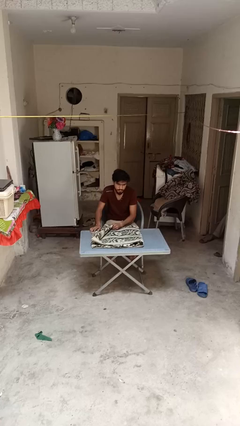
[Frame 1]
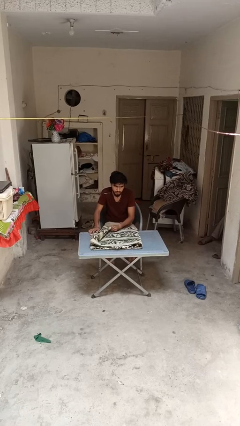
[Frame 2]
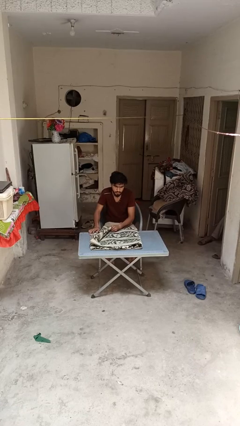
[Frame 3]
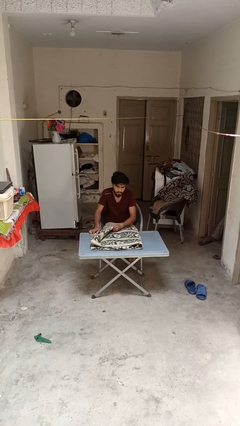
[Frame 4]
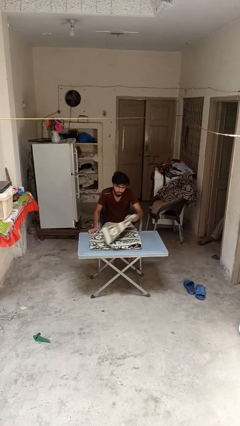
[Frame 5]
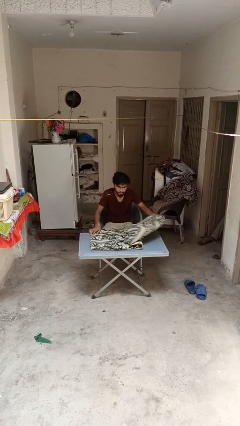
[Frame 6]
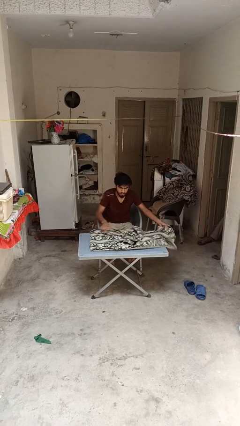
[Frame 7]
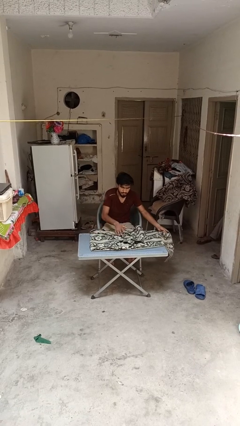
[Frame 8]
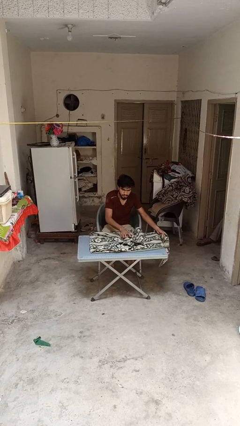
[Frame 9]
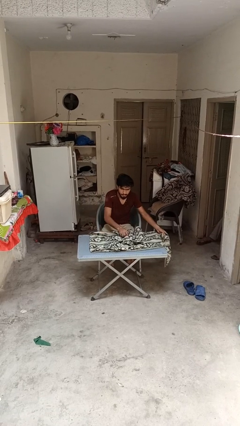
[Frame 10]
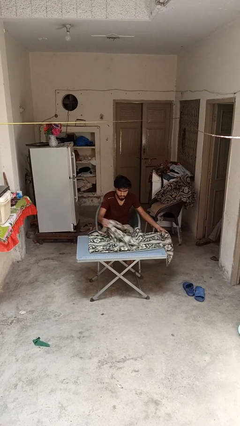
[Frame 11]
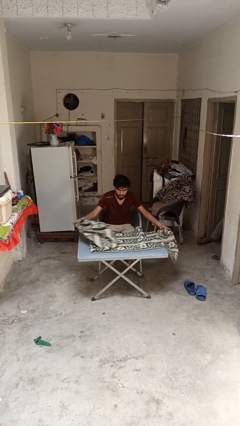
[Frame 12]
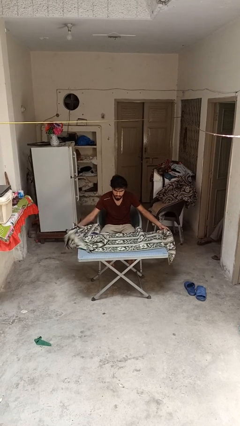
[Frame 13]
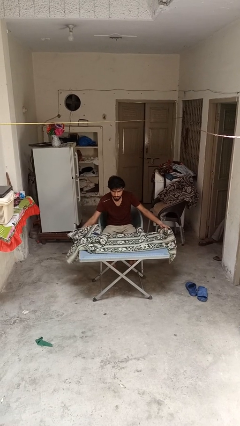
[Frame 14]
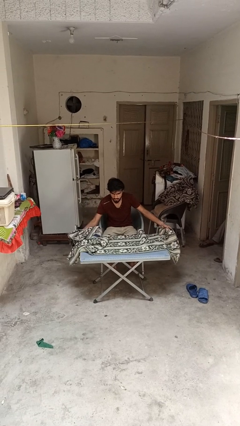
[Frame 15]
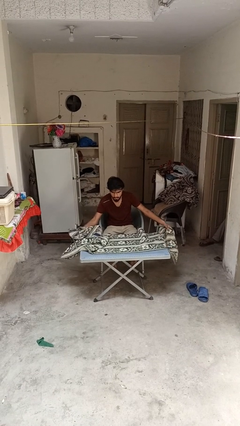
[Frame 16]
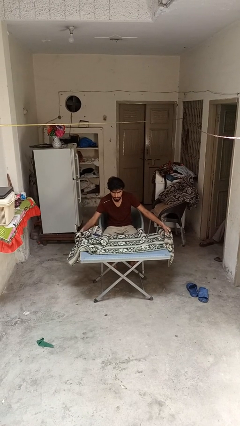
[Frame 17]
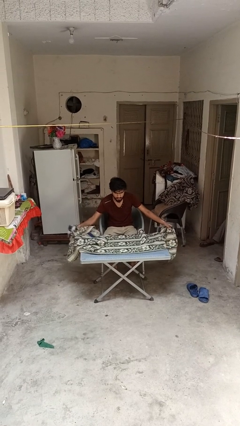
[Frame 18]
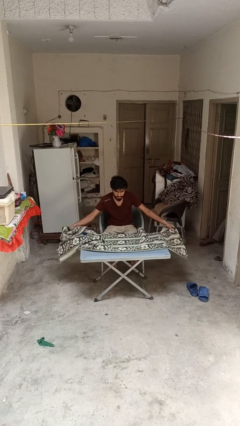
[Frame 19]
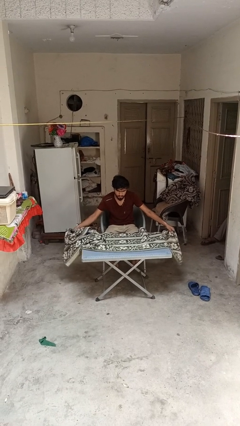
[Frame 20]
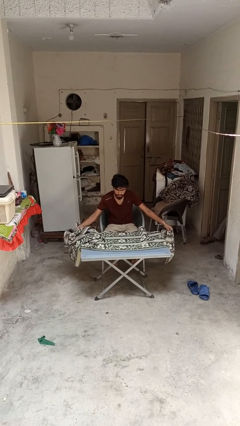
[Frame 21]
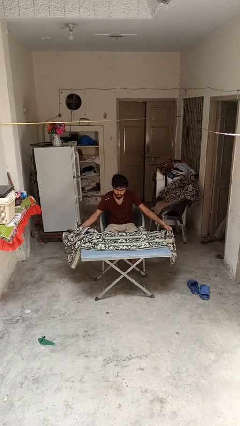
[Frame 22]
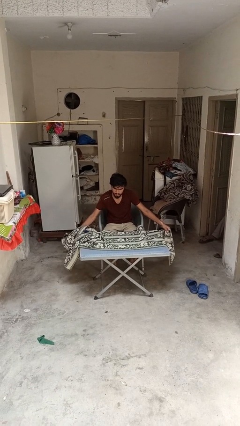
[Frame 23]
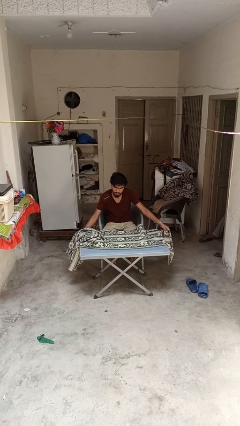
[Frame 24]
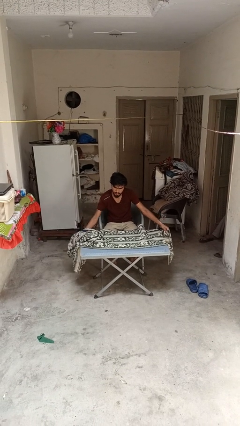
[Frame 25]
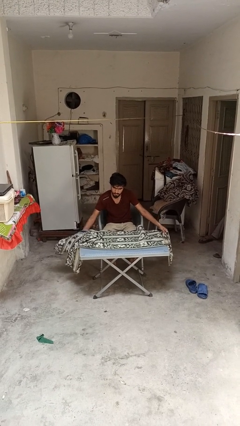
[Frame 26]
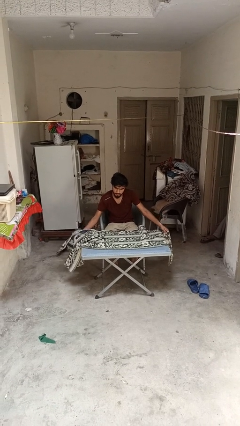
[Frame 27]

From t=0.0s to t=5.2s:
person spreads tablecloth

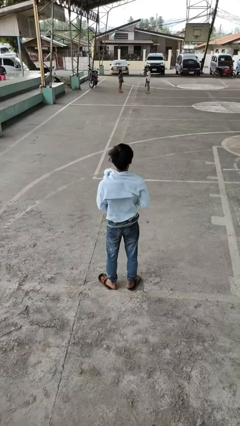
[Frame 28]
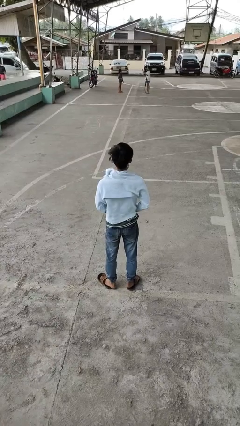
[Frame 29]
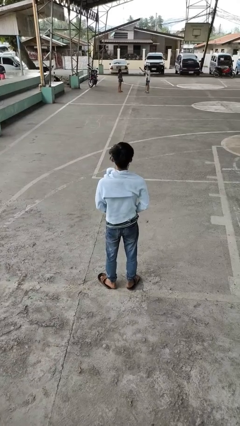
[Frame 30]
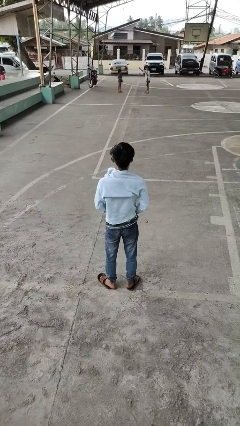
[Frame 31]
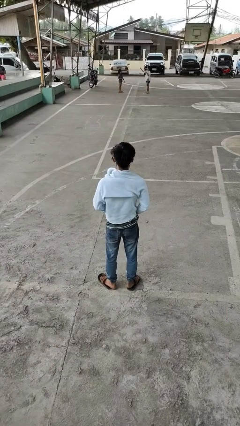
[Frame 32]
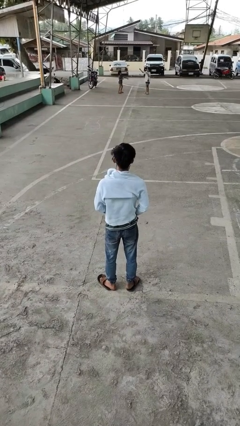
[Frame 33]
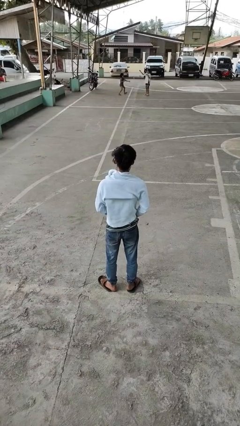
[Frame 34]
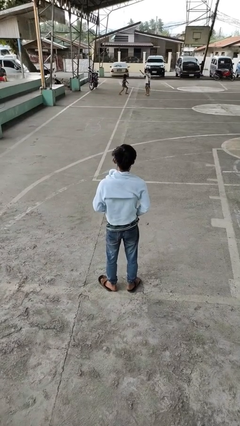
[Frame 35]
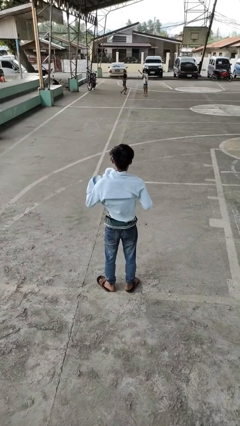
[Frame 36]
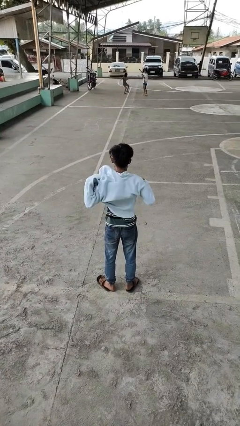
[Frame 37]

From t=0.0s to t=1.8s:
person unzips jacket

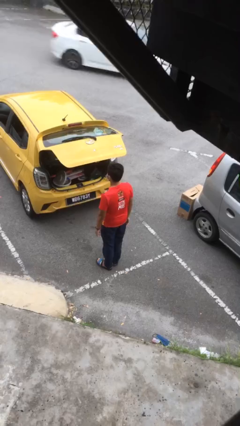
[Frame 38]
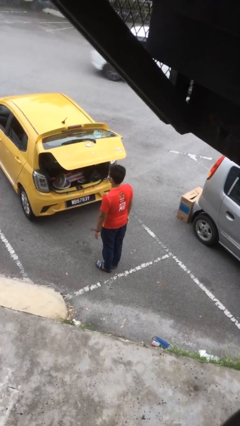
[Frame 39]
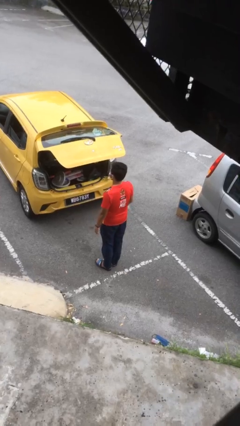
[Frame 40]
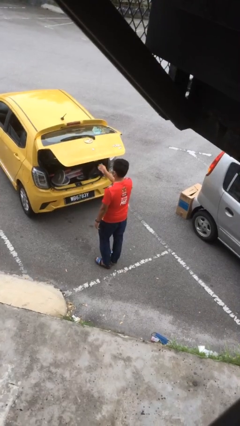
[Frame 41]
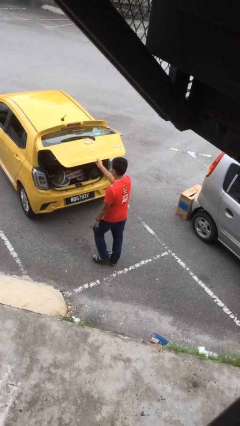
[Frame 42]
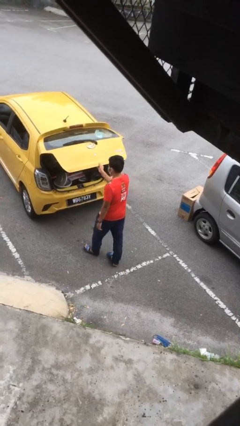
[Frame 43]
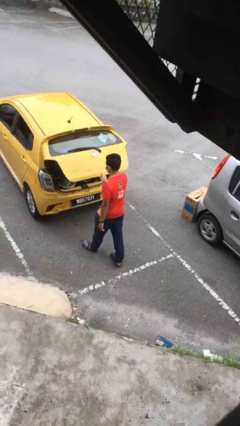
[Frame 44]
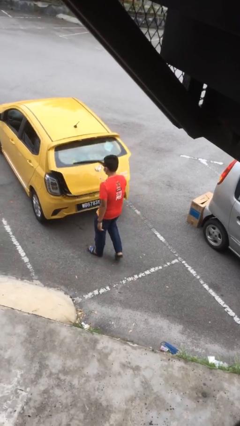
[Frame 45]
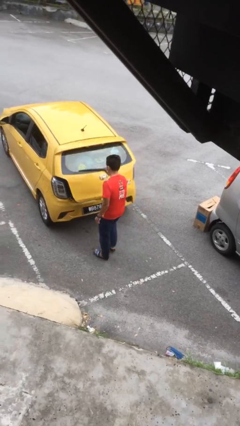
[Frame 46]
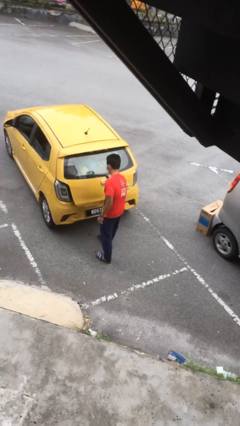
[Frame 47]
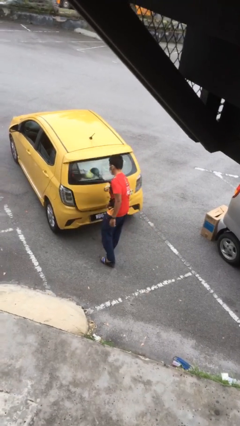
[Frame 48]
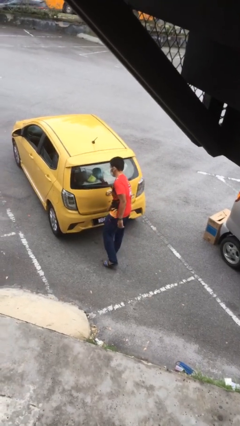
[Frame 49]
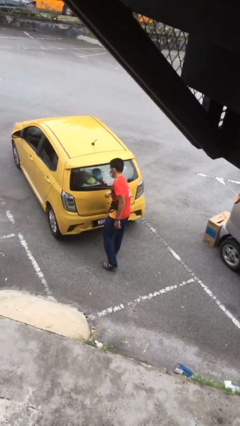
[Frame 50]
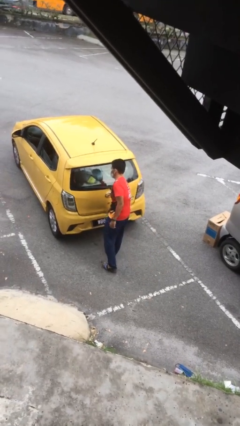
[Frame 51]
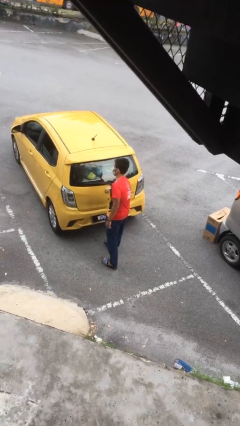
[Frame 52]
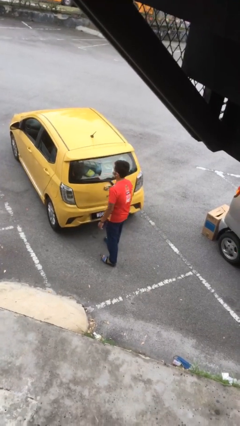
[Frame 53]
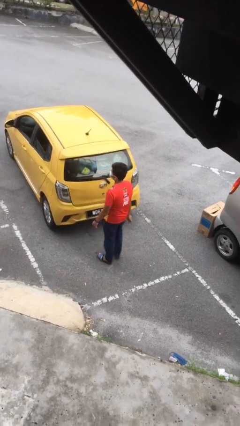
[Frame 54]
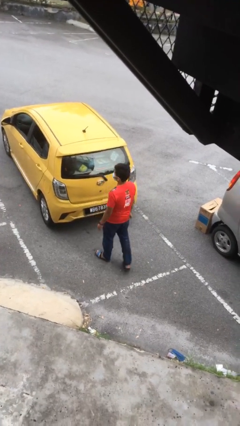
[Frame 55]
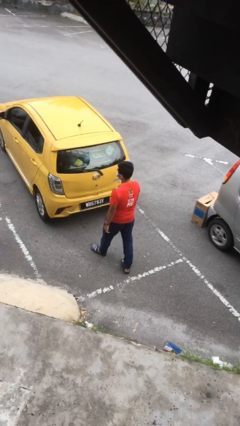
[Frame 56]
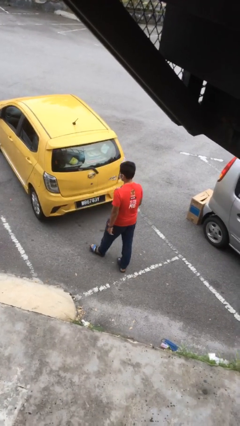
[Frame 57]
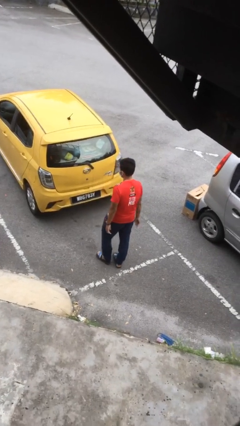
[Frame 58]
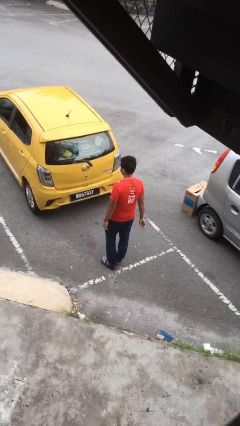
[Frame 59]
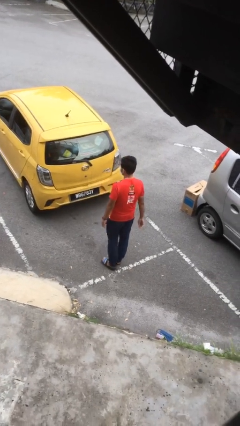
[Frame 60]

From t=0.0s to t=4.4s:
person closes car trunk

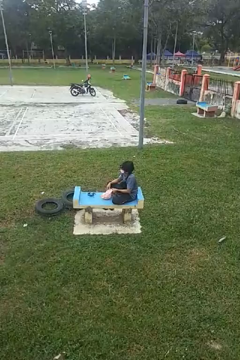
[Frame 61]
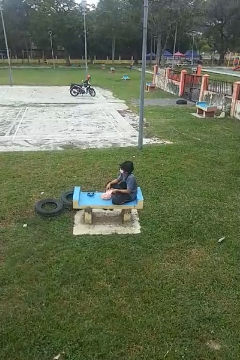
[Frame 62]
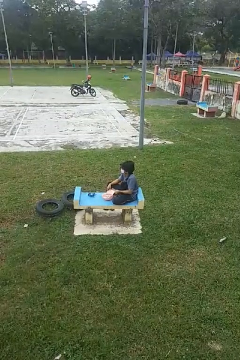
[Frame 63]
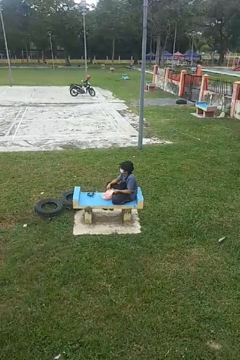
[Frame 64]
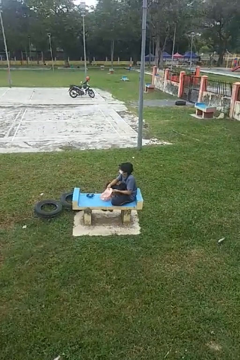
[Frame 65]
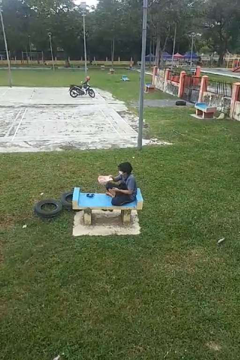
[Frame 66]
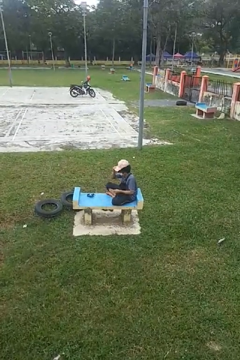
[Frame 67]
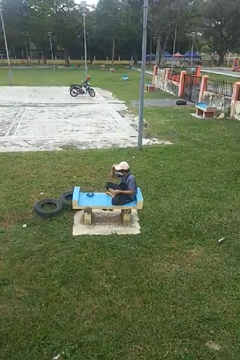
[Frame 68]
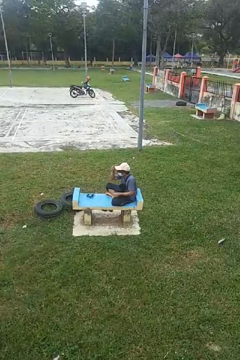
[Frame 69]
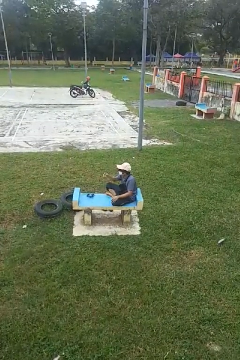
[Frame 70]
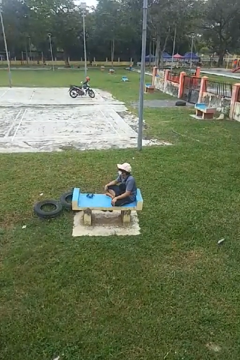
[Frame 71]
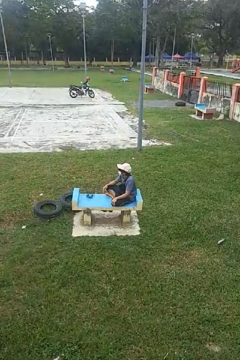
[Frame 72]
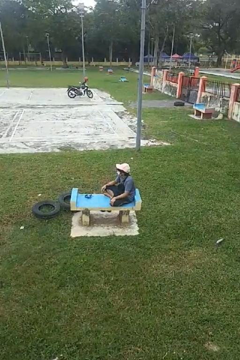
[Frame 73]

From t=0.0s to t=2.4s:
person puts on hat

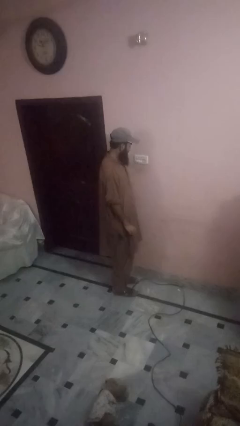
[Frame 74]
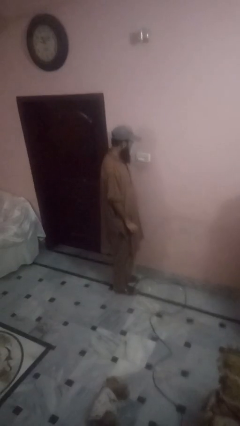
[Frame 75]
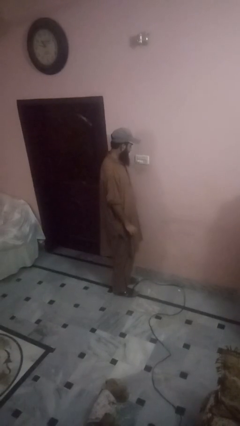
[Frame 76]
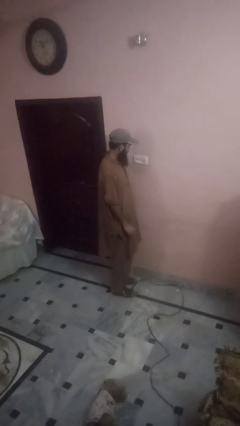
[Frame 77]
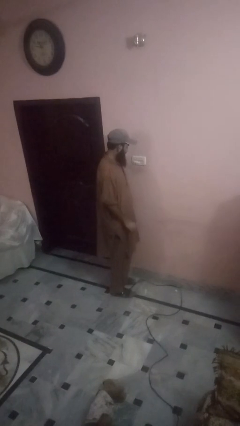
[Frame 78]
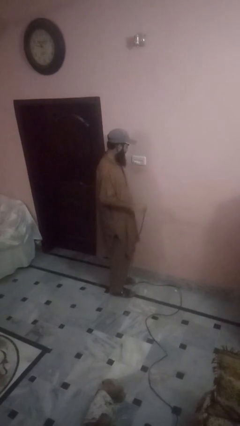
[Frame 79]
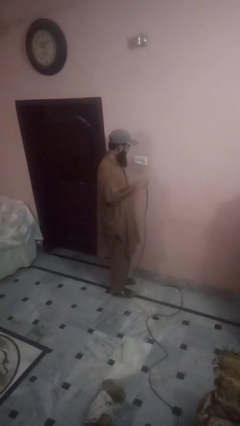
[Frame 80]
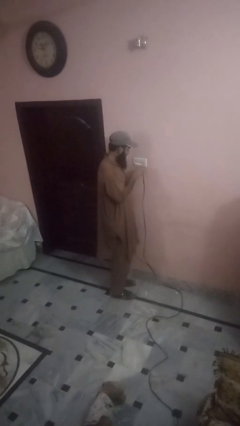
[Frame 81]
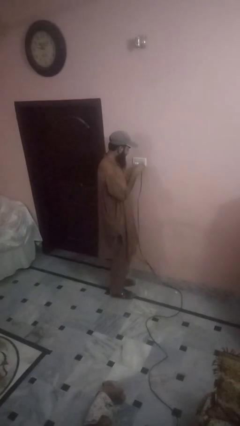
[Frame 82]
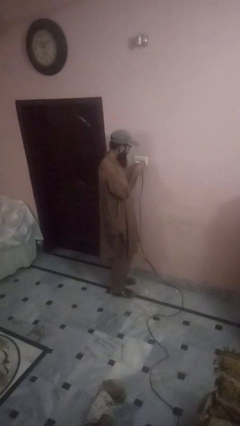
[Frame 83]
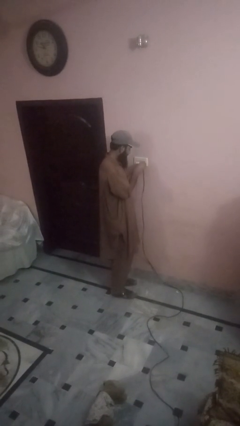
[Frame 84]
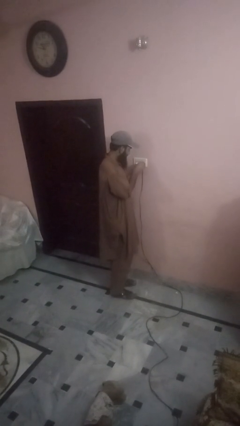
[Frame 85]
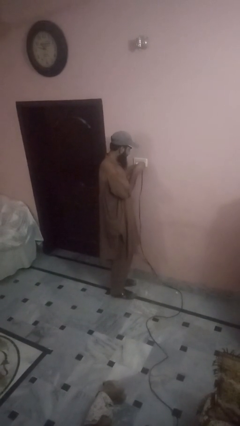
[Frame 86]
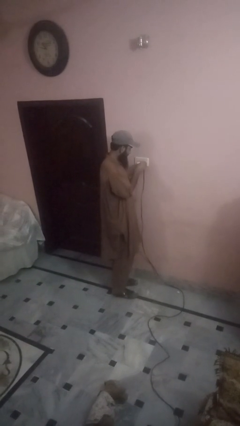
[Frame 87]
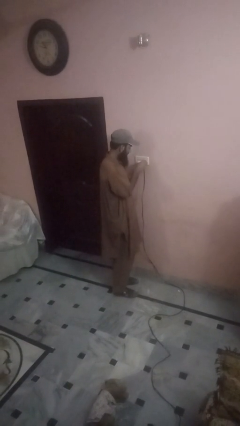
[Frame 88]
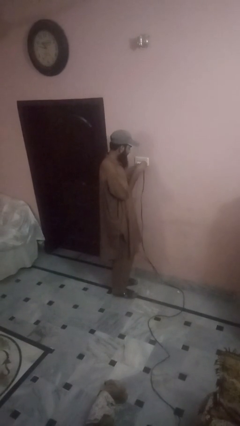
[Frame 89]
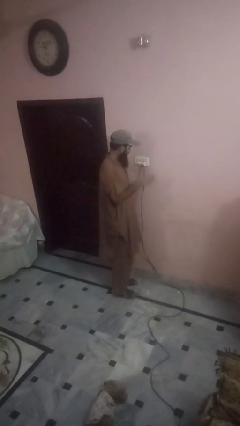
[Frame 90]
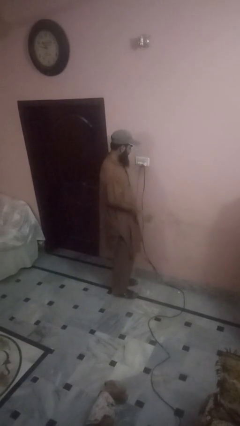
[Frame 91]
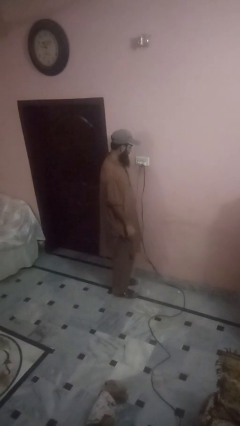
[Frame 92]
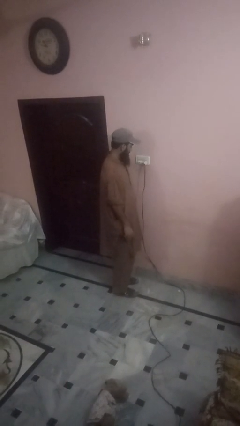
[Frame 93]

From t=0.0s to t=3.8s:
person plugs into electrical socket

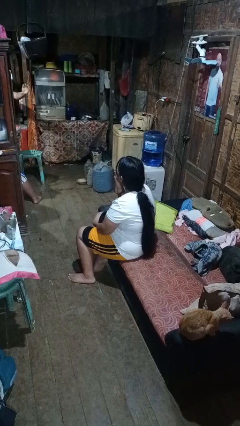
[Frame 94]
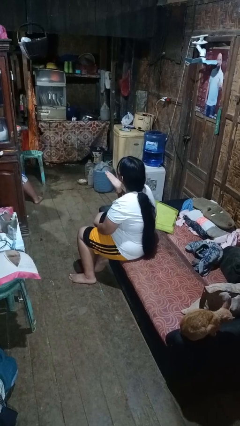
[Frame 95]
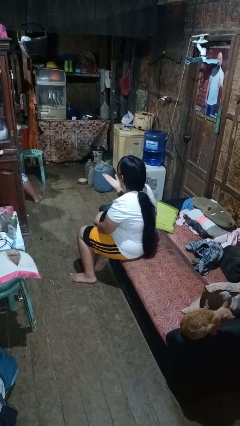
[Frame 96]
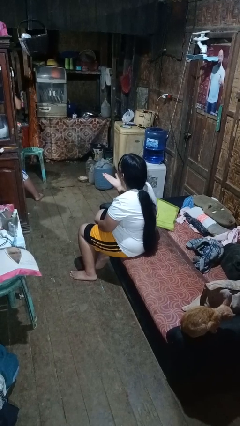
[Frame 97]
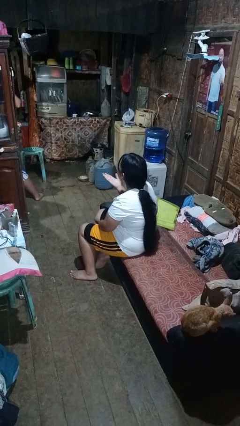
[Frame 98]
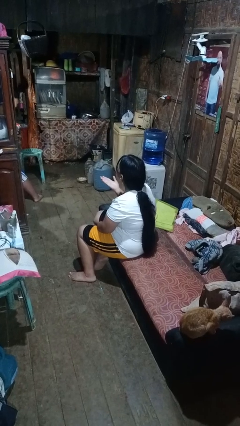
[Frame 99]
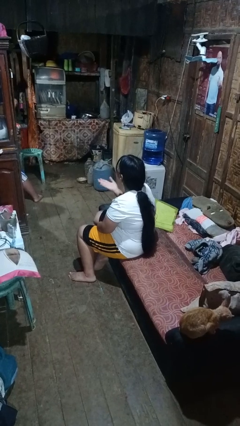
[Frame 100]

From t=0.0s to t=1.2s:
person gestures blow kiss
